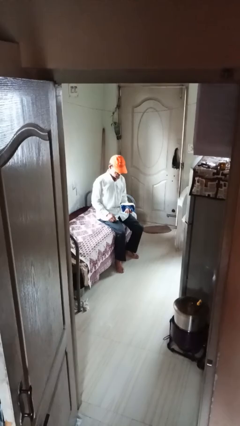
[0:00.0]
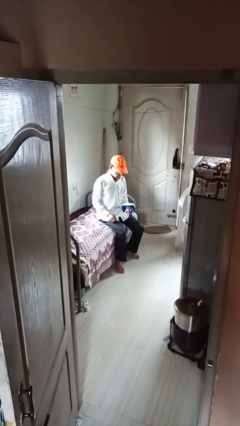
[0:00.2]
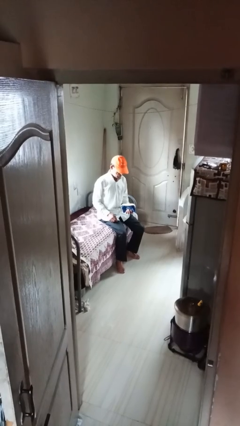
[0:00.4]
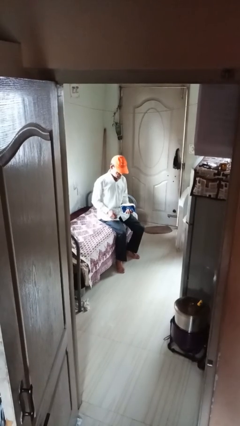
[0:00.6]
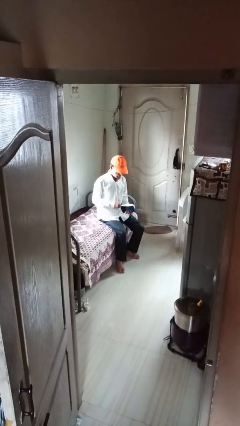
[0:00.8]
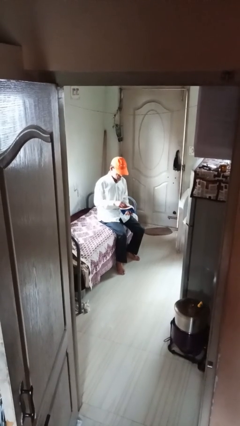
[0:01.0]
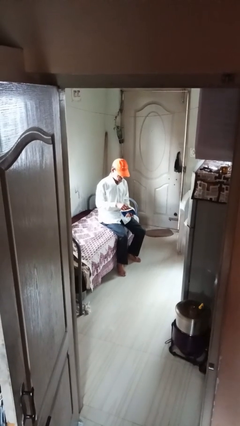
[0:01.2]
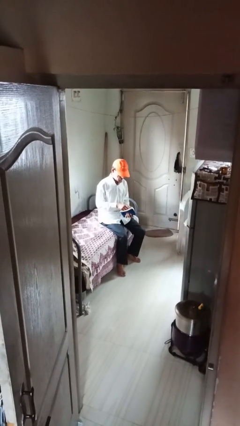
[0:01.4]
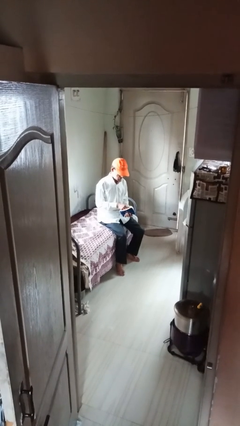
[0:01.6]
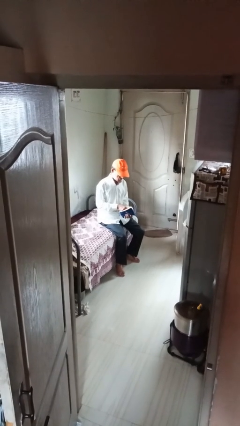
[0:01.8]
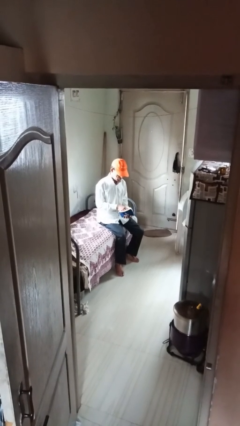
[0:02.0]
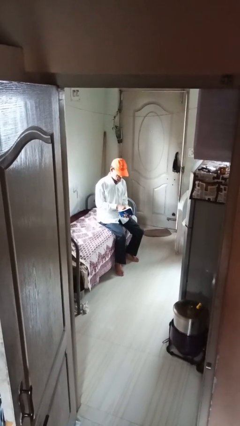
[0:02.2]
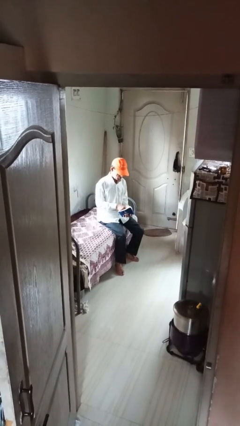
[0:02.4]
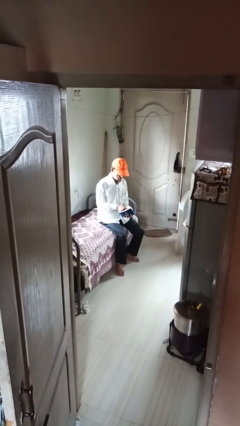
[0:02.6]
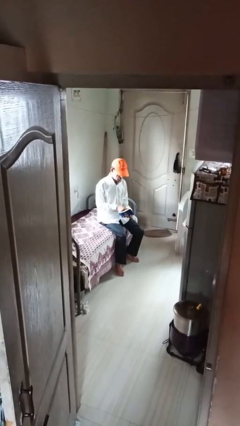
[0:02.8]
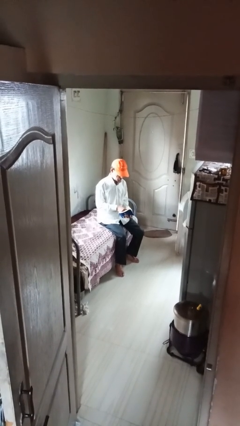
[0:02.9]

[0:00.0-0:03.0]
person searches in purse

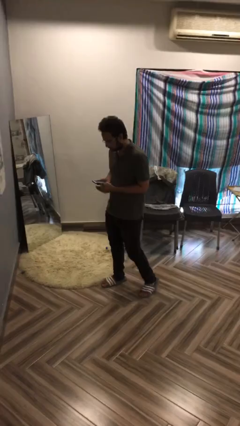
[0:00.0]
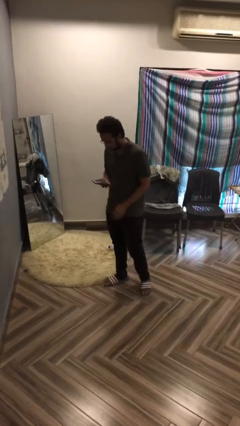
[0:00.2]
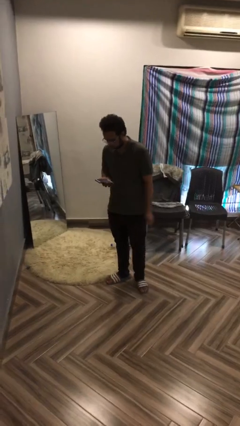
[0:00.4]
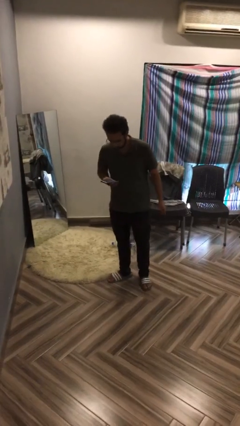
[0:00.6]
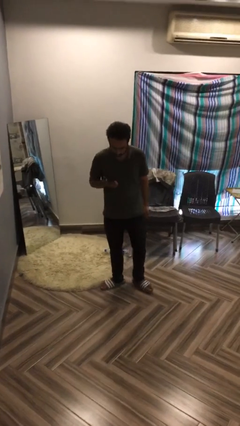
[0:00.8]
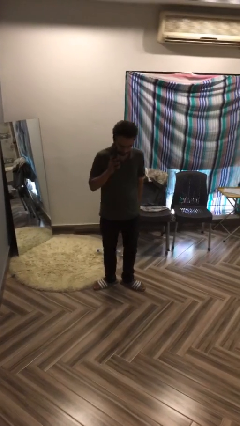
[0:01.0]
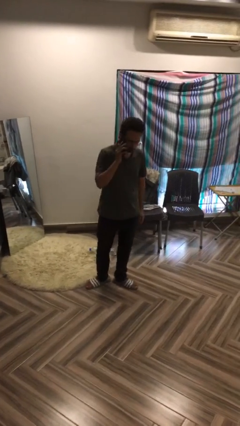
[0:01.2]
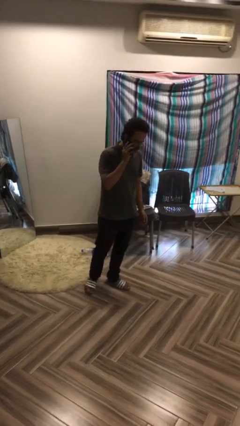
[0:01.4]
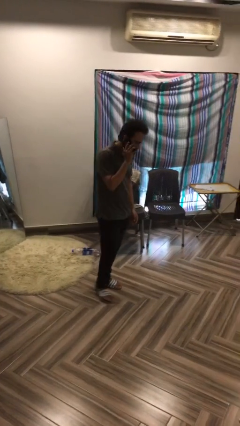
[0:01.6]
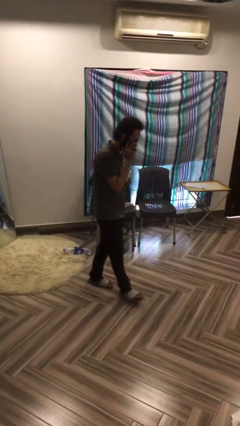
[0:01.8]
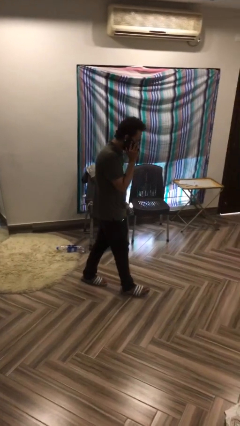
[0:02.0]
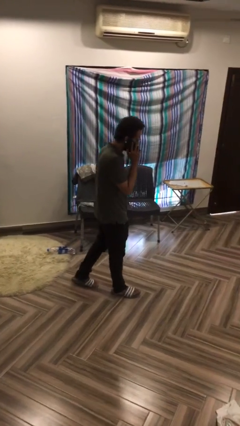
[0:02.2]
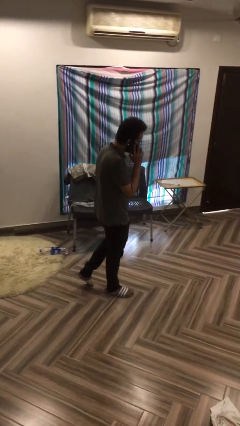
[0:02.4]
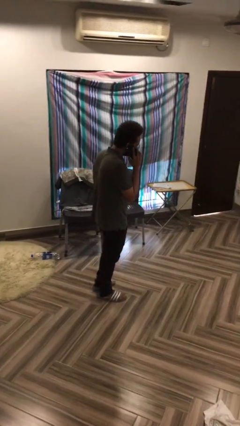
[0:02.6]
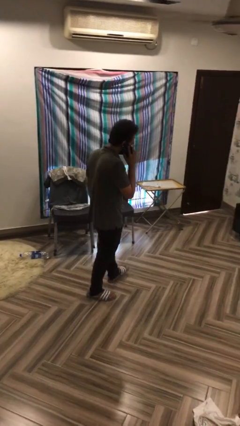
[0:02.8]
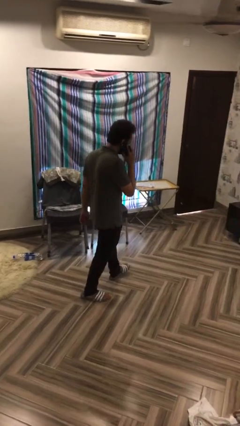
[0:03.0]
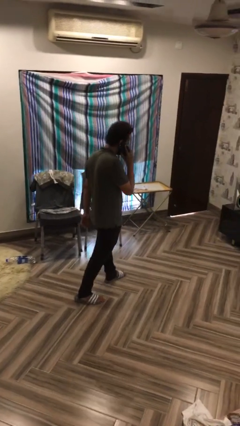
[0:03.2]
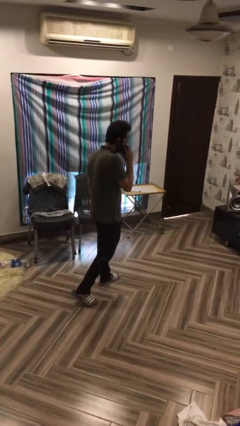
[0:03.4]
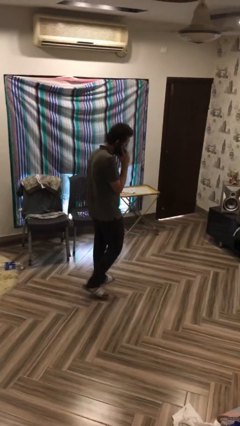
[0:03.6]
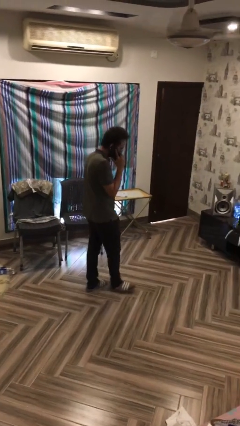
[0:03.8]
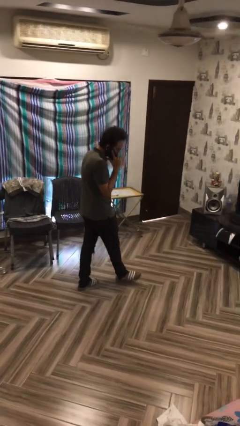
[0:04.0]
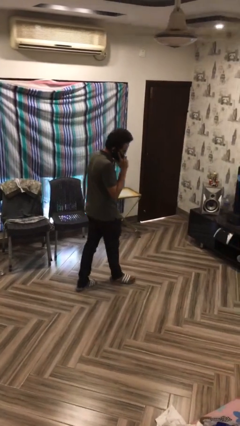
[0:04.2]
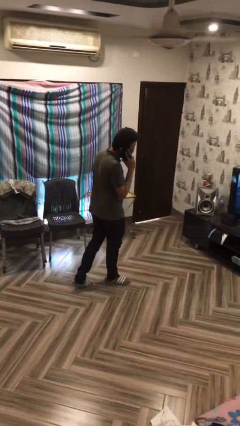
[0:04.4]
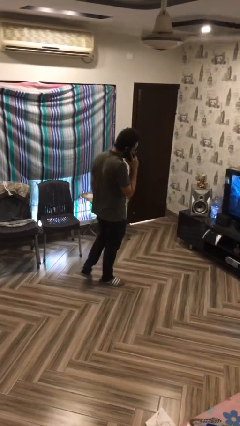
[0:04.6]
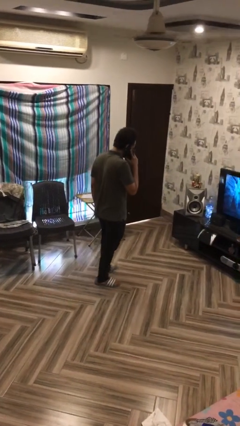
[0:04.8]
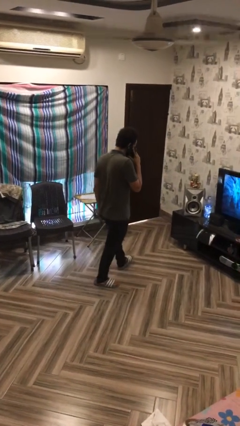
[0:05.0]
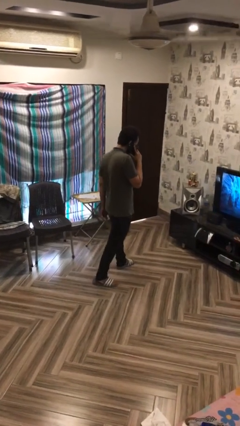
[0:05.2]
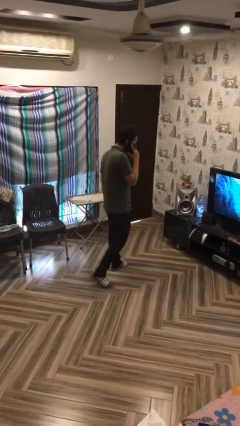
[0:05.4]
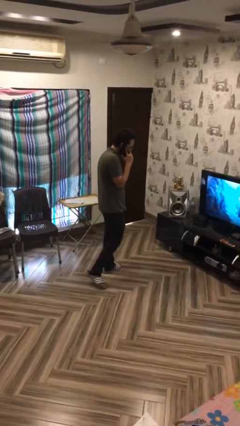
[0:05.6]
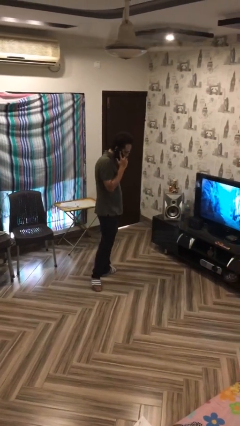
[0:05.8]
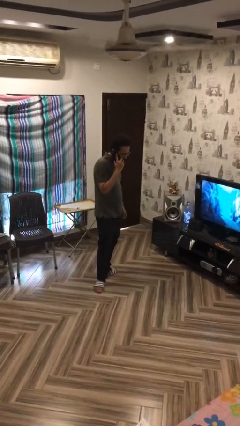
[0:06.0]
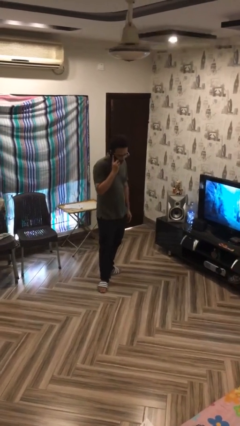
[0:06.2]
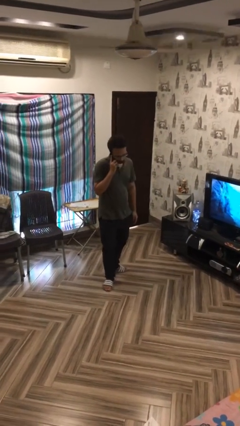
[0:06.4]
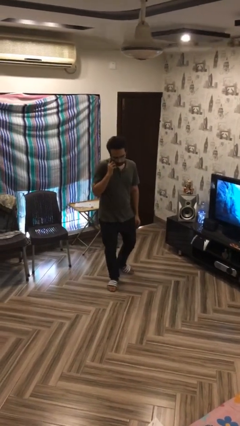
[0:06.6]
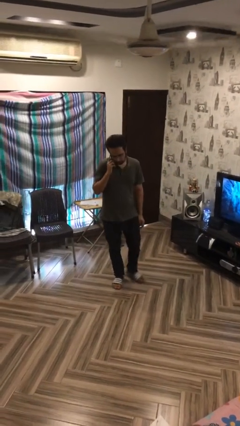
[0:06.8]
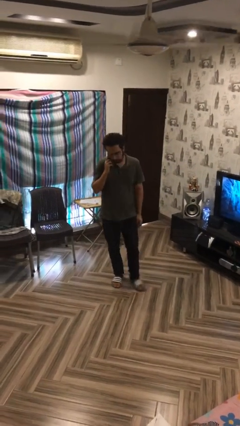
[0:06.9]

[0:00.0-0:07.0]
person talks on phone

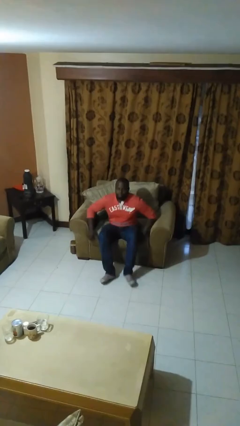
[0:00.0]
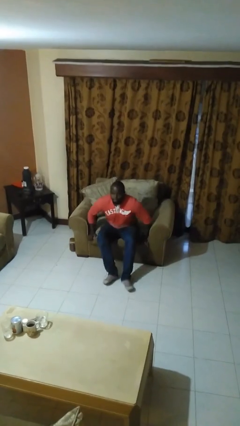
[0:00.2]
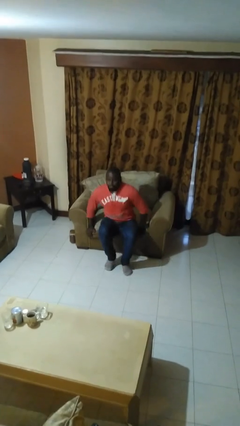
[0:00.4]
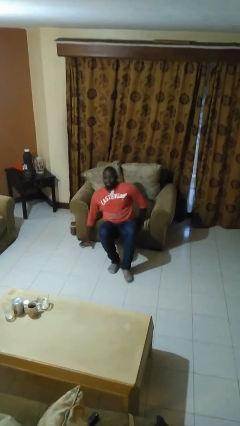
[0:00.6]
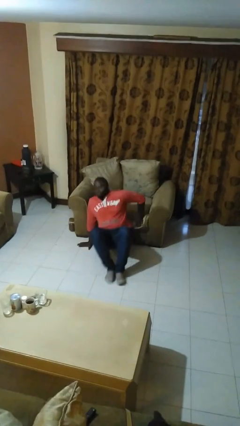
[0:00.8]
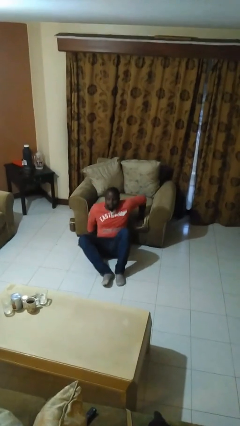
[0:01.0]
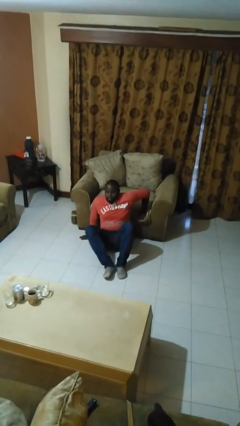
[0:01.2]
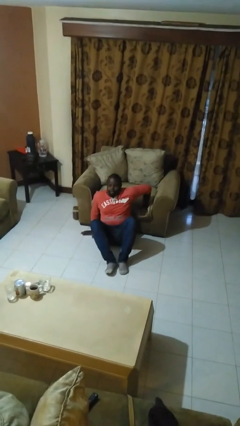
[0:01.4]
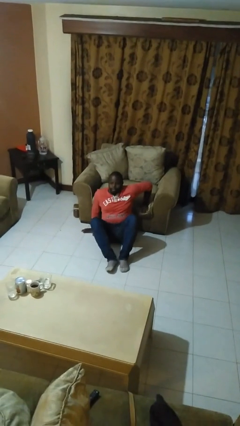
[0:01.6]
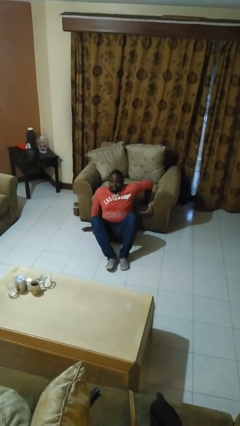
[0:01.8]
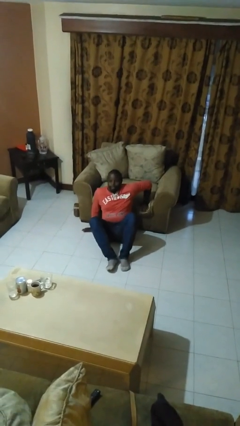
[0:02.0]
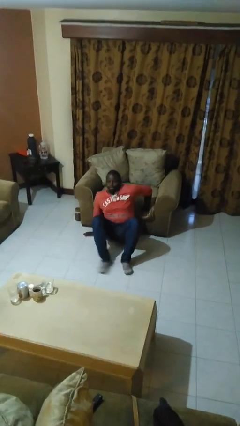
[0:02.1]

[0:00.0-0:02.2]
person falls from chair

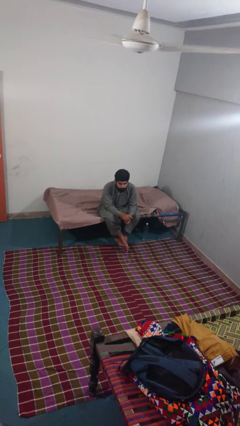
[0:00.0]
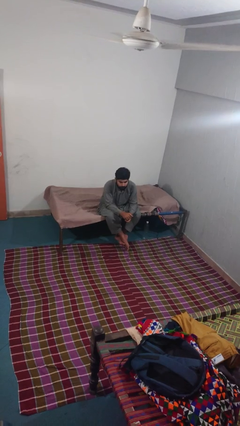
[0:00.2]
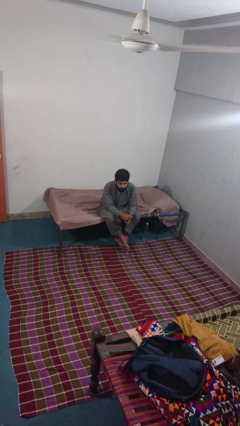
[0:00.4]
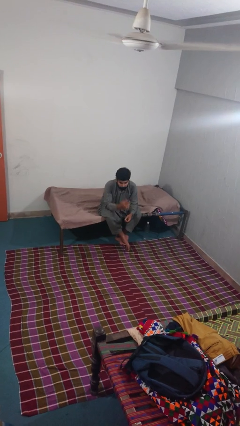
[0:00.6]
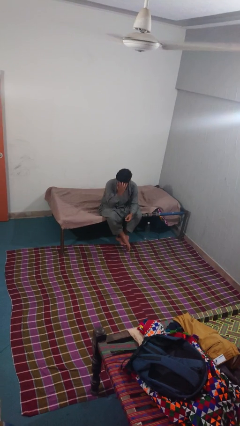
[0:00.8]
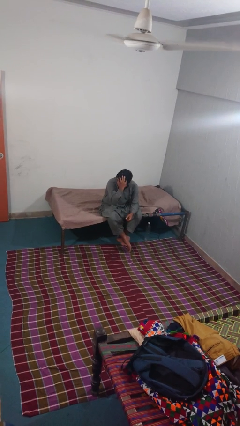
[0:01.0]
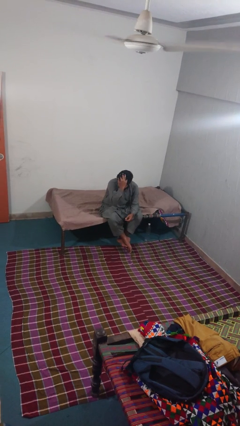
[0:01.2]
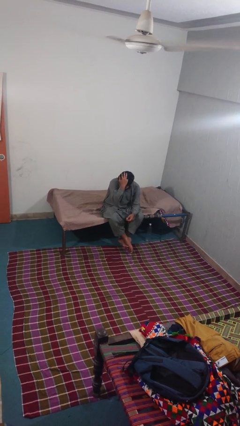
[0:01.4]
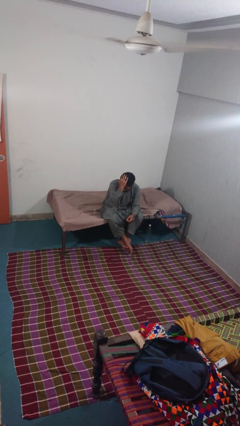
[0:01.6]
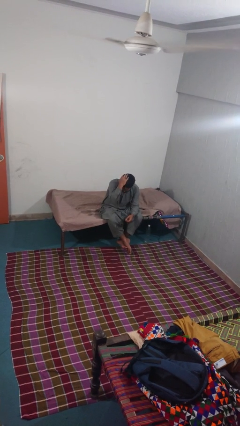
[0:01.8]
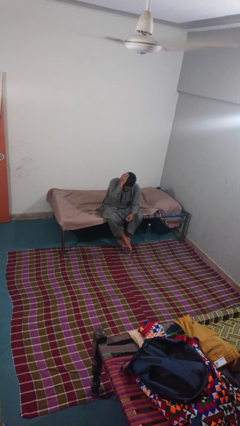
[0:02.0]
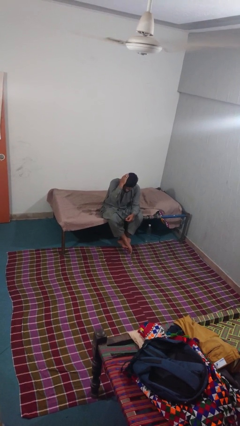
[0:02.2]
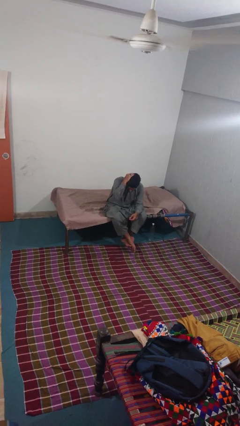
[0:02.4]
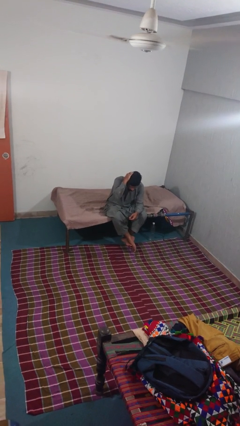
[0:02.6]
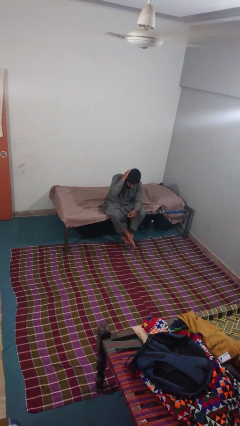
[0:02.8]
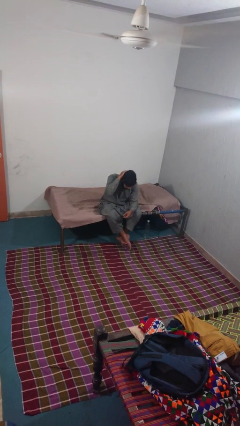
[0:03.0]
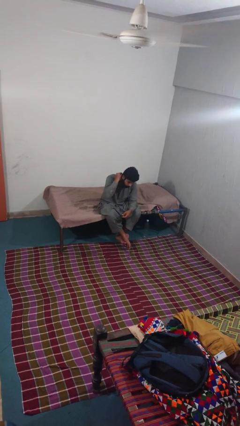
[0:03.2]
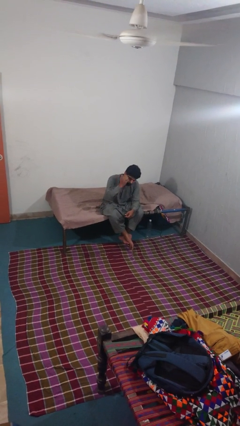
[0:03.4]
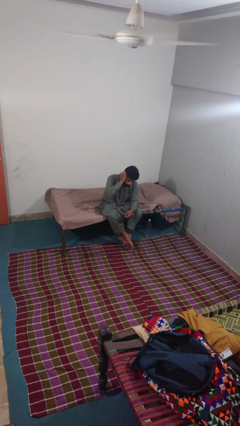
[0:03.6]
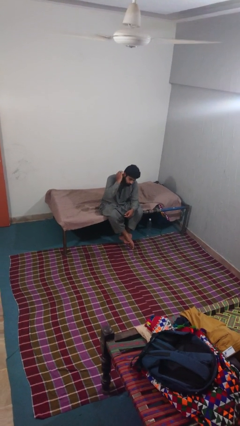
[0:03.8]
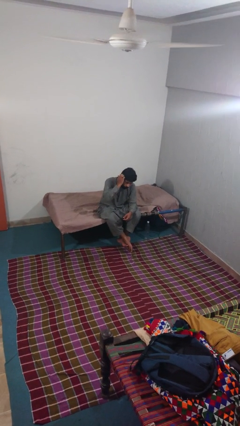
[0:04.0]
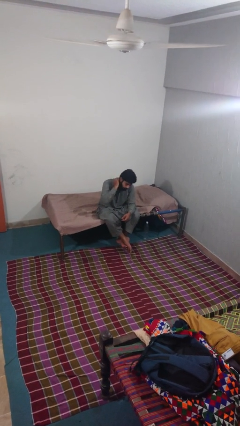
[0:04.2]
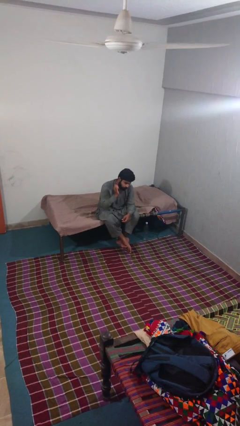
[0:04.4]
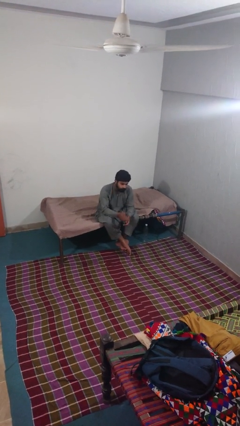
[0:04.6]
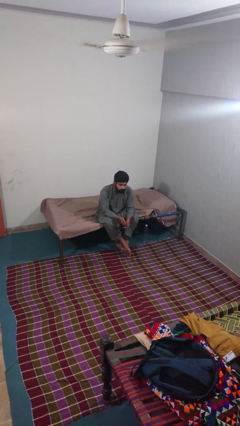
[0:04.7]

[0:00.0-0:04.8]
person strokes hair

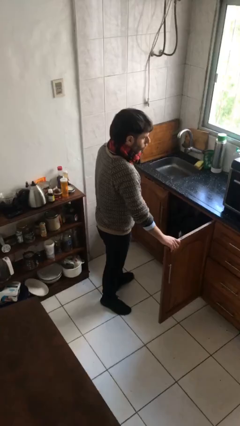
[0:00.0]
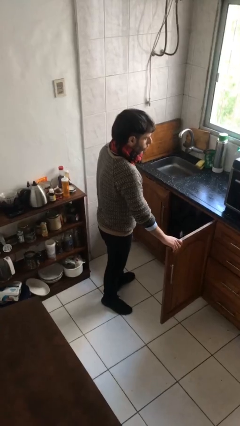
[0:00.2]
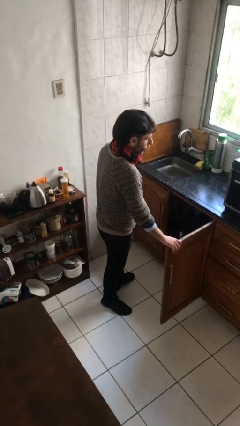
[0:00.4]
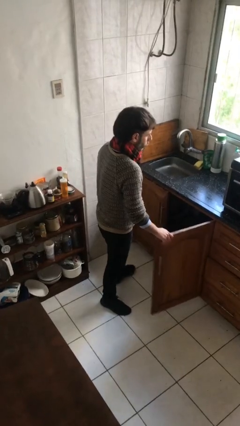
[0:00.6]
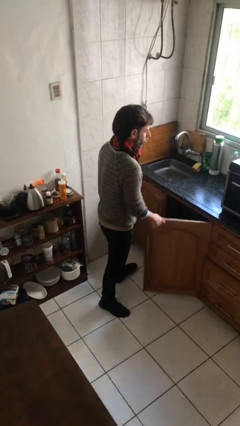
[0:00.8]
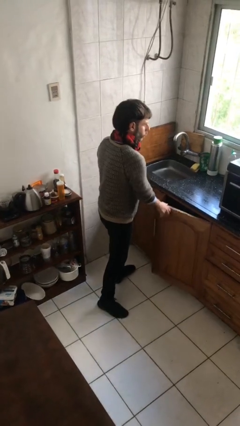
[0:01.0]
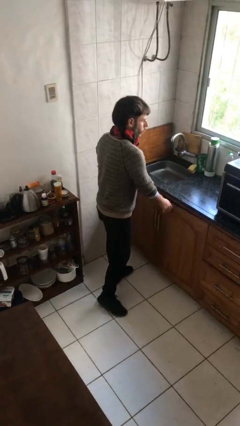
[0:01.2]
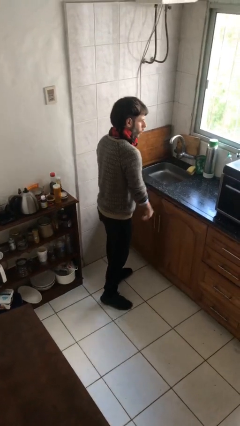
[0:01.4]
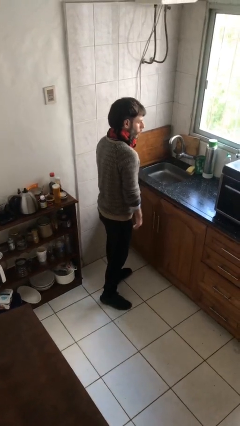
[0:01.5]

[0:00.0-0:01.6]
person closes cabinet
